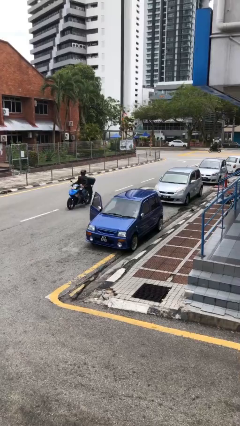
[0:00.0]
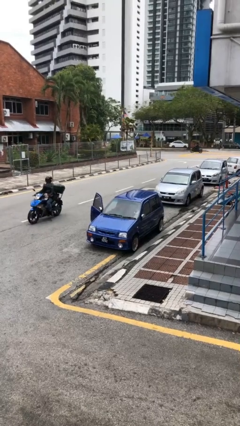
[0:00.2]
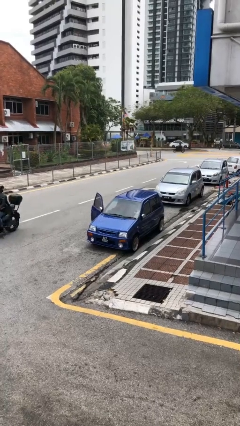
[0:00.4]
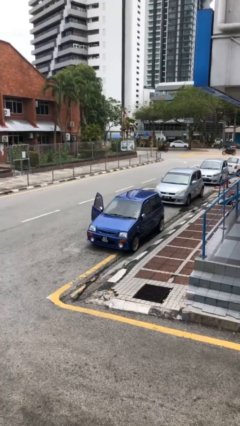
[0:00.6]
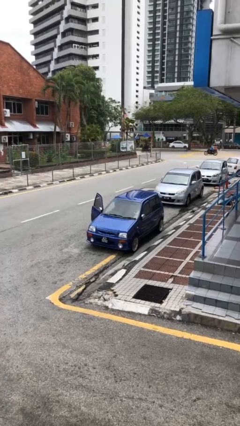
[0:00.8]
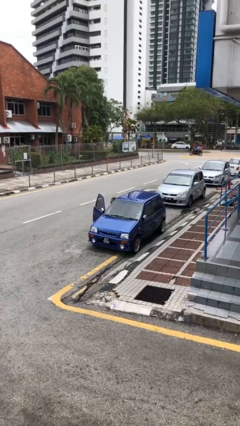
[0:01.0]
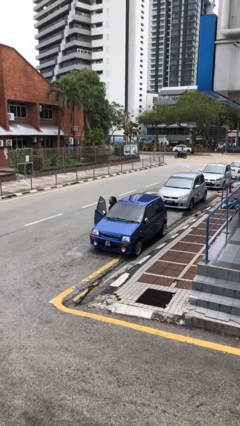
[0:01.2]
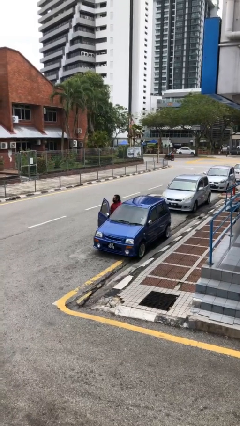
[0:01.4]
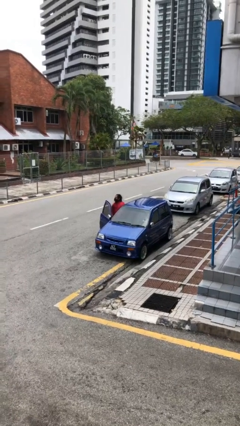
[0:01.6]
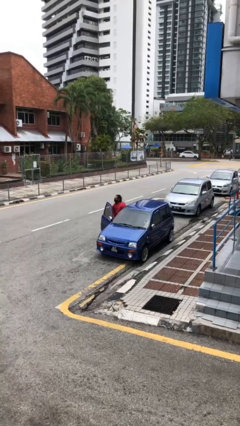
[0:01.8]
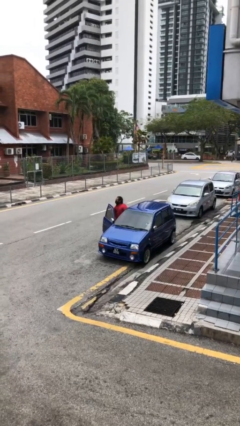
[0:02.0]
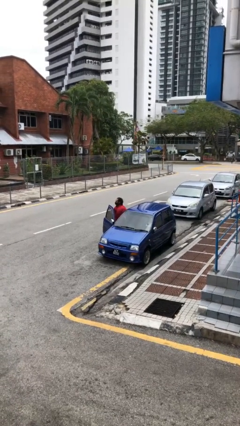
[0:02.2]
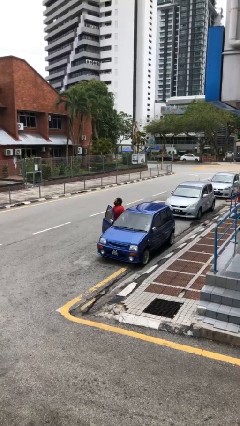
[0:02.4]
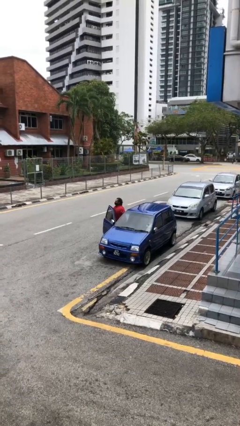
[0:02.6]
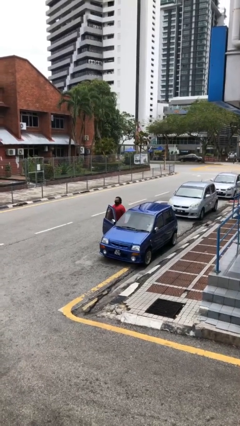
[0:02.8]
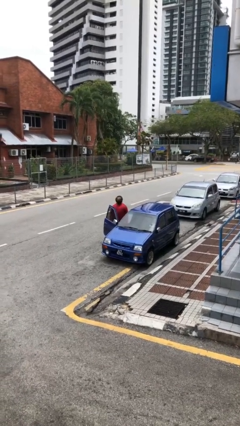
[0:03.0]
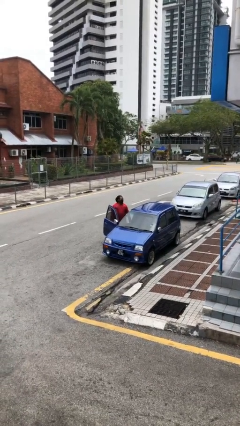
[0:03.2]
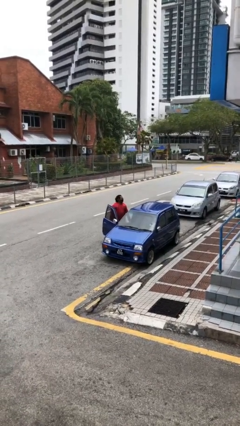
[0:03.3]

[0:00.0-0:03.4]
person exits car

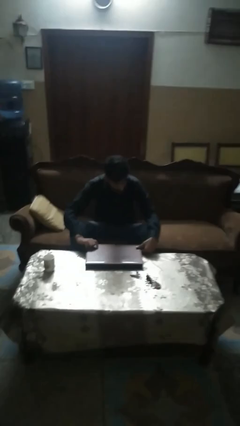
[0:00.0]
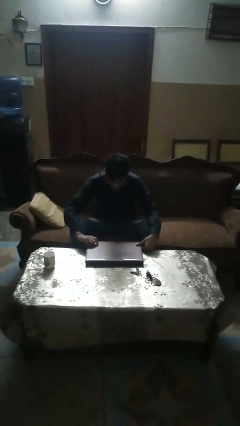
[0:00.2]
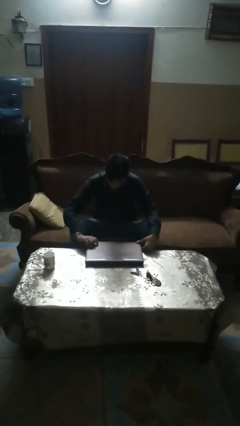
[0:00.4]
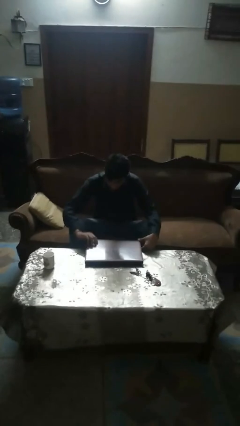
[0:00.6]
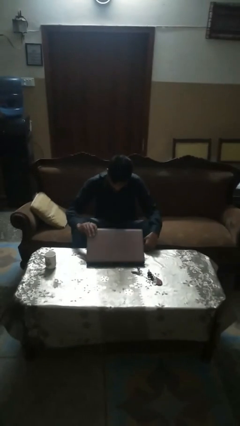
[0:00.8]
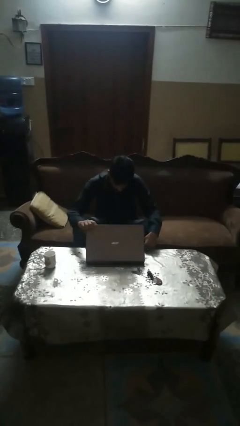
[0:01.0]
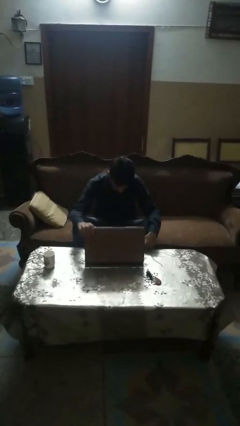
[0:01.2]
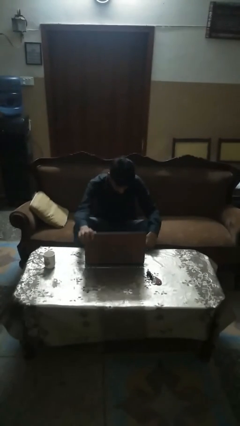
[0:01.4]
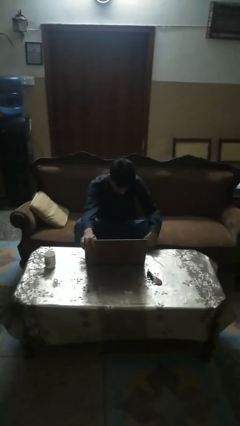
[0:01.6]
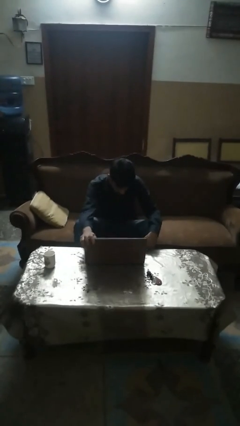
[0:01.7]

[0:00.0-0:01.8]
person opens laptop

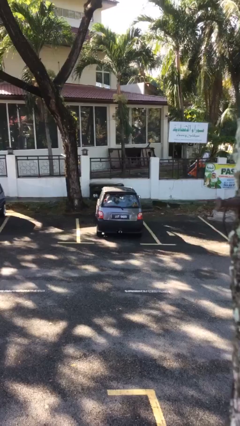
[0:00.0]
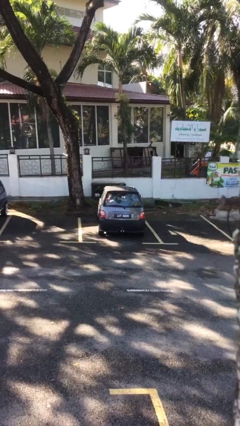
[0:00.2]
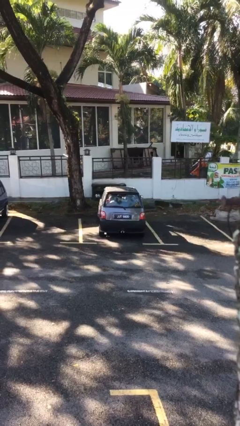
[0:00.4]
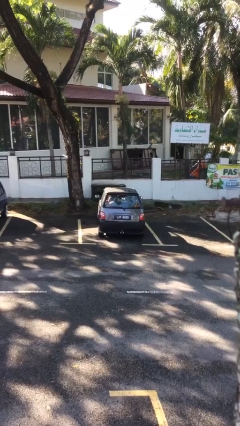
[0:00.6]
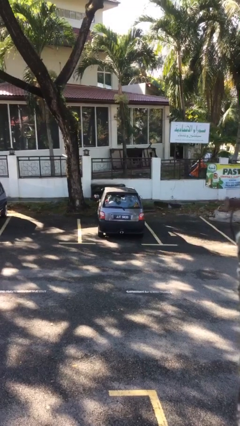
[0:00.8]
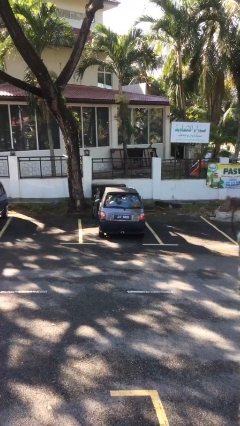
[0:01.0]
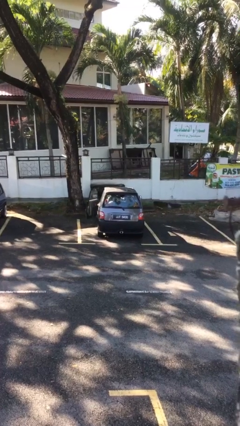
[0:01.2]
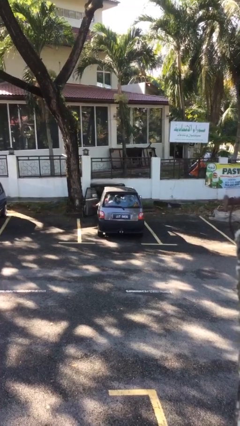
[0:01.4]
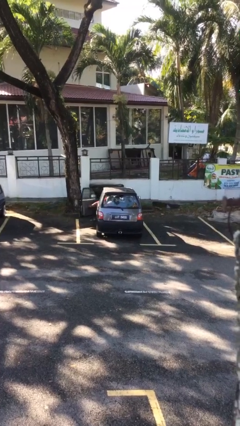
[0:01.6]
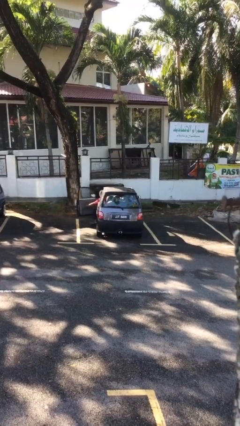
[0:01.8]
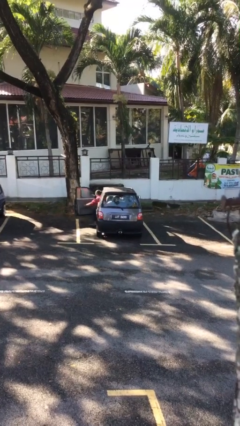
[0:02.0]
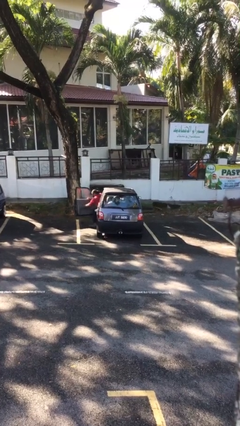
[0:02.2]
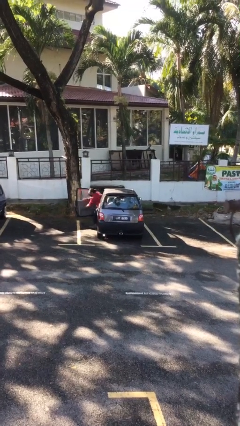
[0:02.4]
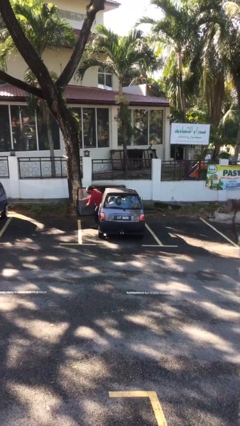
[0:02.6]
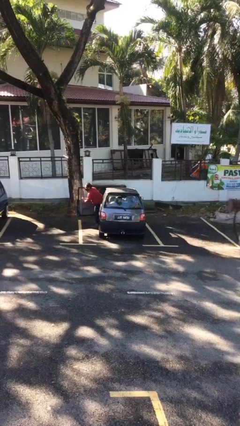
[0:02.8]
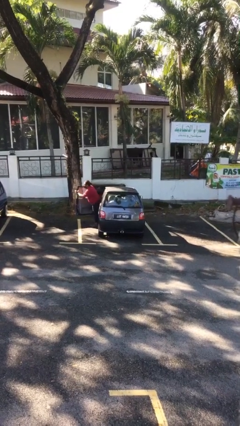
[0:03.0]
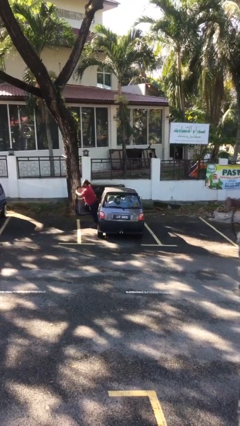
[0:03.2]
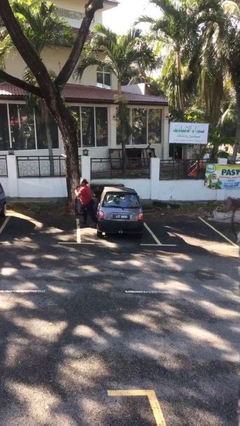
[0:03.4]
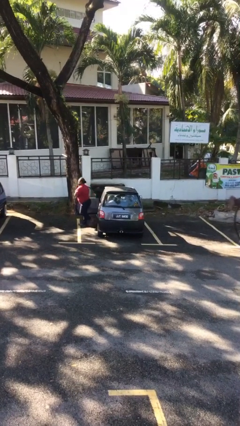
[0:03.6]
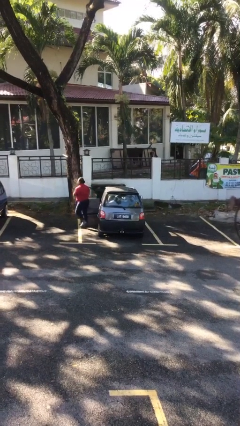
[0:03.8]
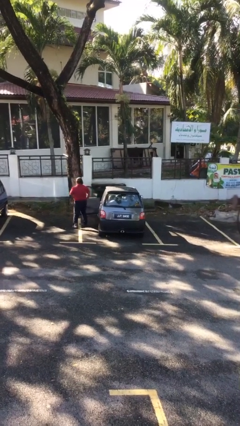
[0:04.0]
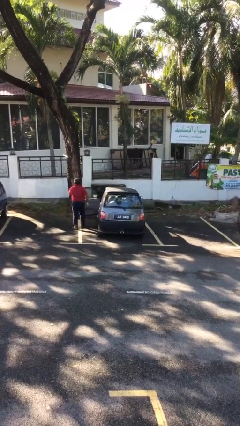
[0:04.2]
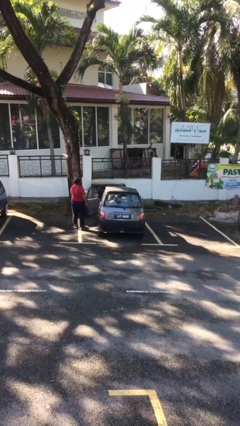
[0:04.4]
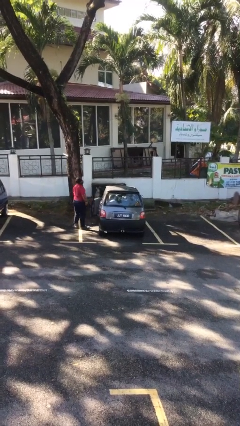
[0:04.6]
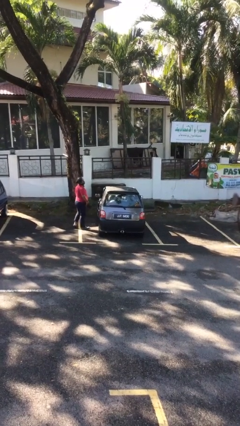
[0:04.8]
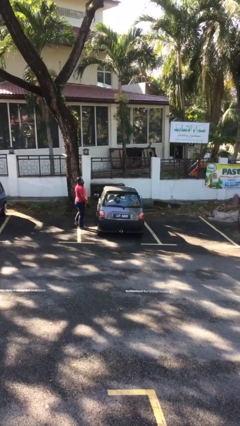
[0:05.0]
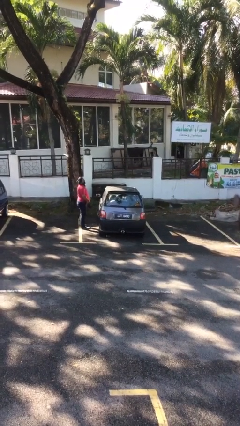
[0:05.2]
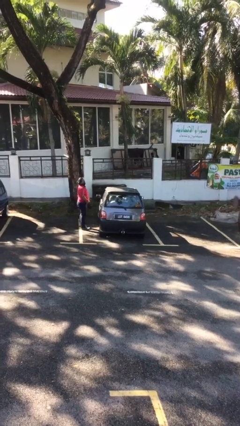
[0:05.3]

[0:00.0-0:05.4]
car drops off person

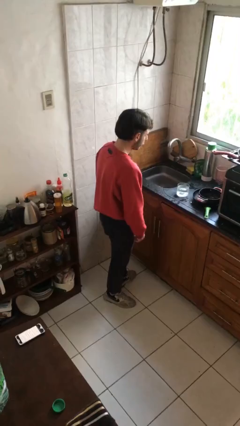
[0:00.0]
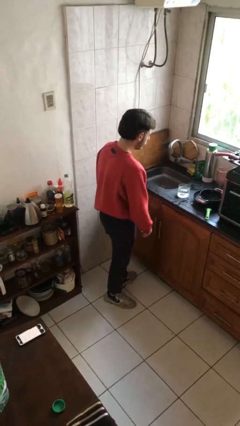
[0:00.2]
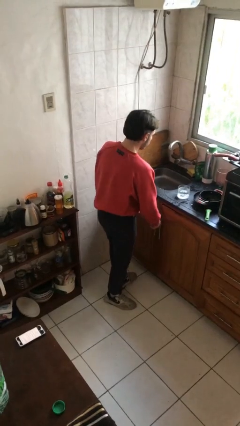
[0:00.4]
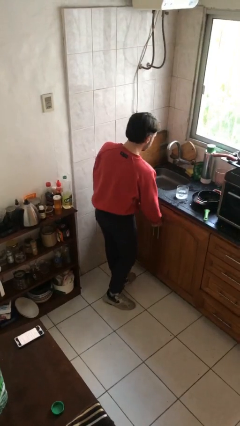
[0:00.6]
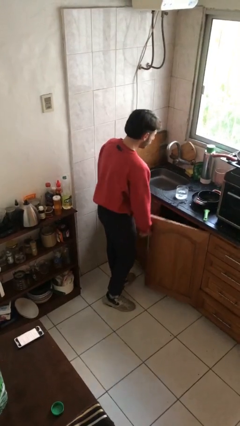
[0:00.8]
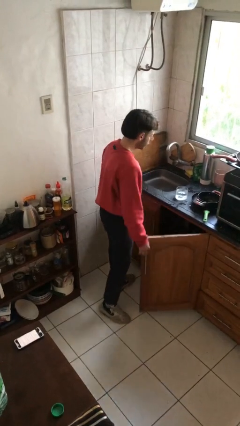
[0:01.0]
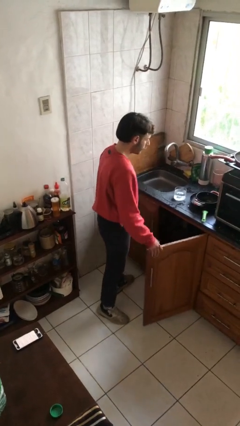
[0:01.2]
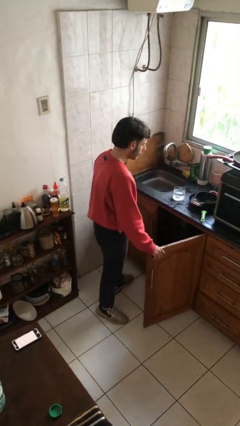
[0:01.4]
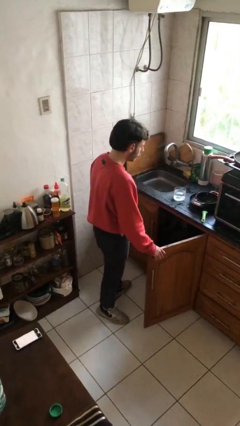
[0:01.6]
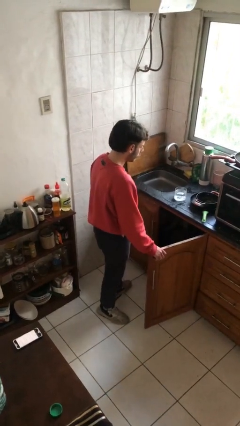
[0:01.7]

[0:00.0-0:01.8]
person opens cabinet

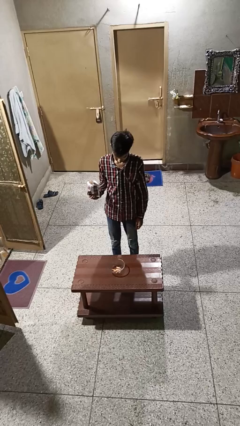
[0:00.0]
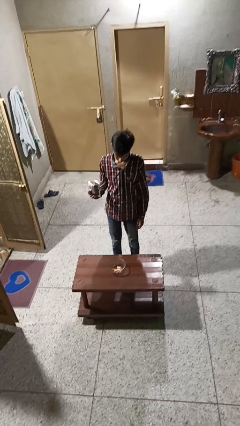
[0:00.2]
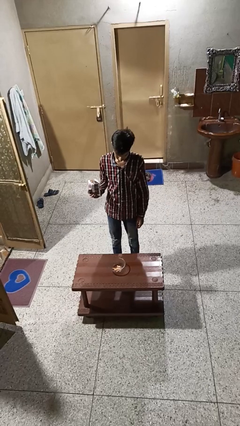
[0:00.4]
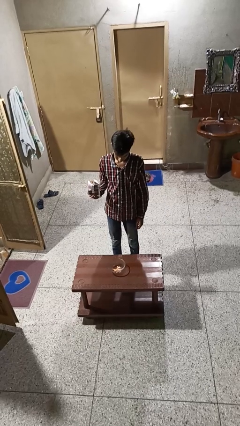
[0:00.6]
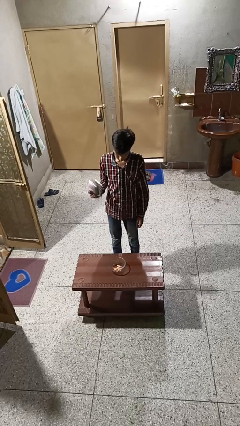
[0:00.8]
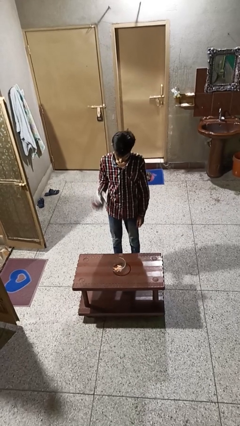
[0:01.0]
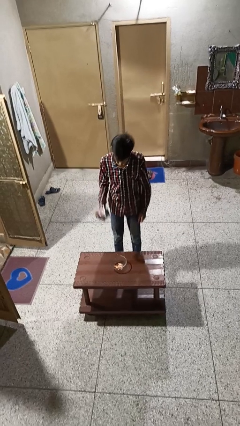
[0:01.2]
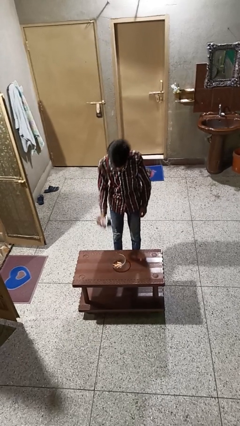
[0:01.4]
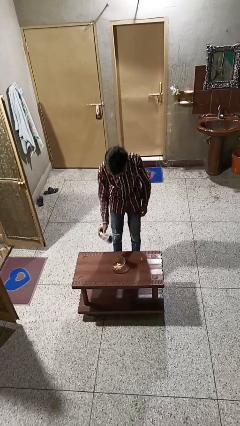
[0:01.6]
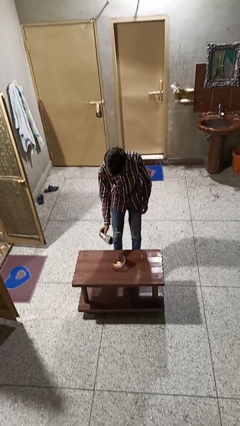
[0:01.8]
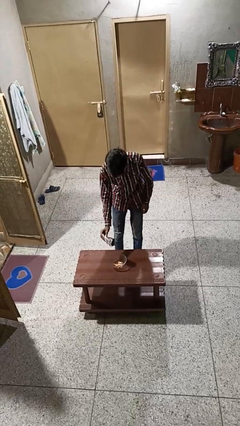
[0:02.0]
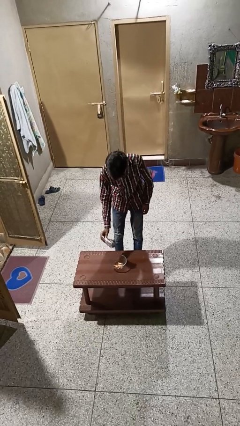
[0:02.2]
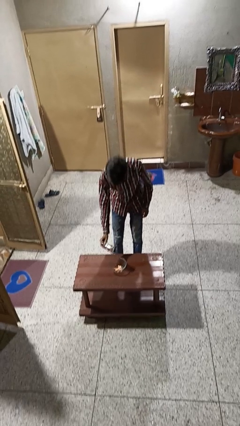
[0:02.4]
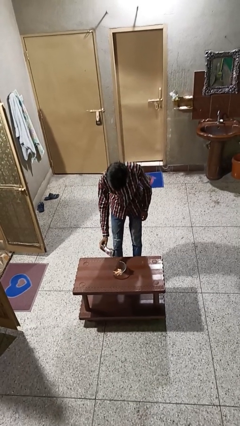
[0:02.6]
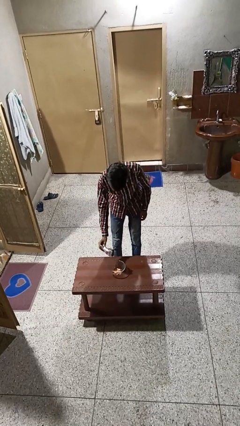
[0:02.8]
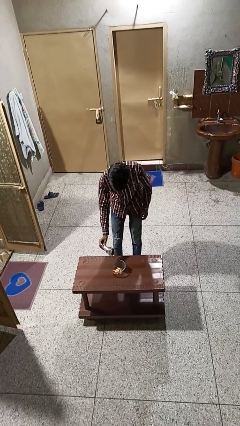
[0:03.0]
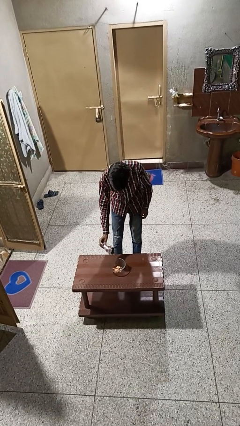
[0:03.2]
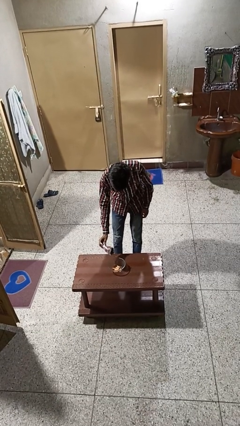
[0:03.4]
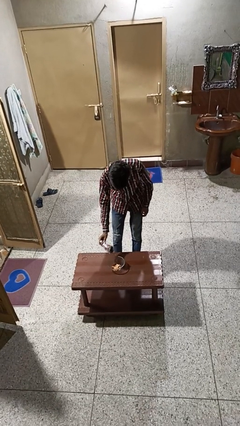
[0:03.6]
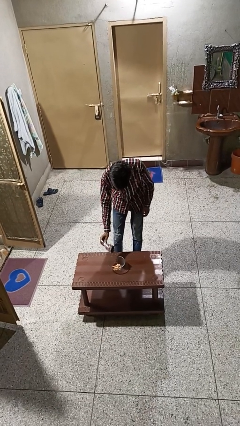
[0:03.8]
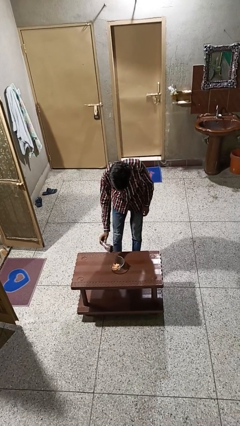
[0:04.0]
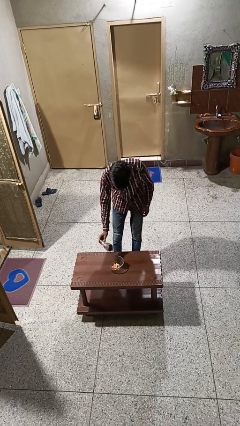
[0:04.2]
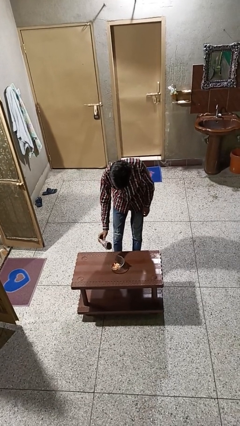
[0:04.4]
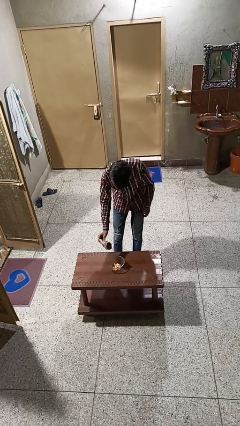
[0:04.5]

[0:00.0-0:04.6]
person pours into bowl

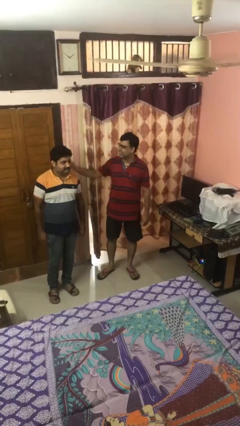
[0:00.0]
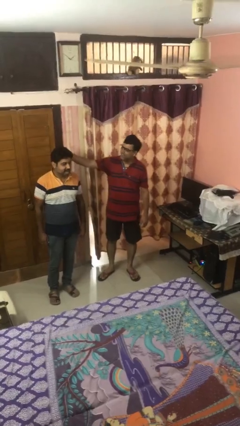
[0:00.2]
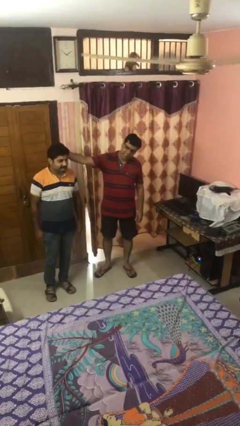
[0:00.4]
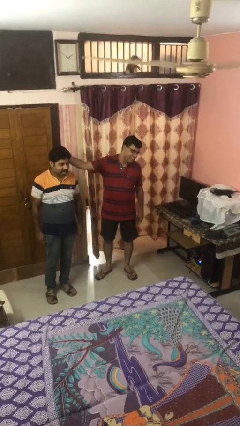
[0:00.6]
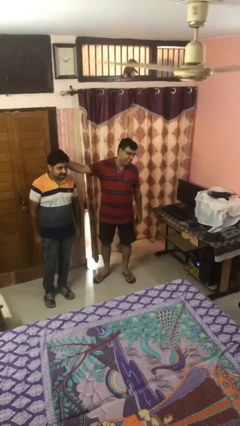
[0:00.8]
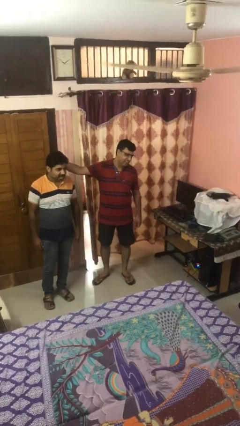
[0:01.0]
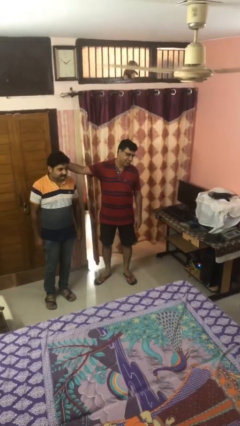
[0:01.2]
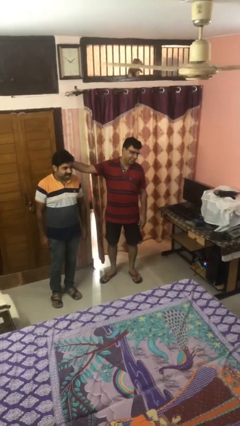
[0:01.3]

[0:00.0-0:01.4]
person grabs person by hair
